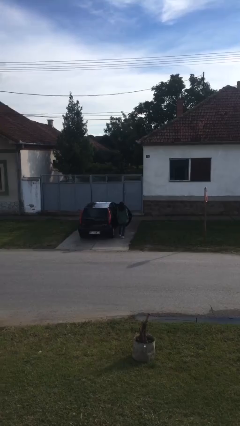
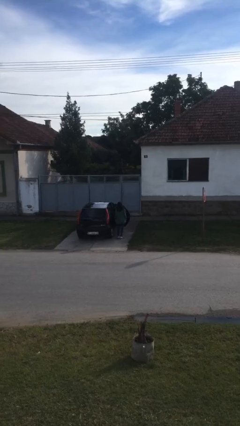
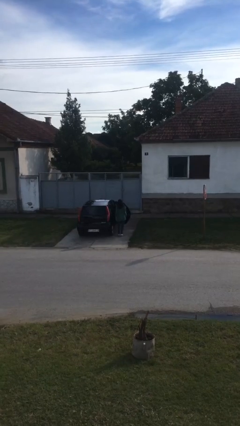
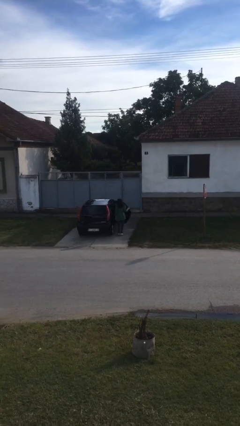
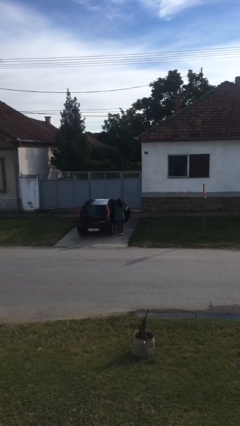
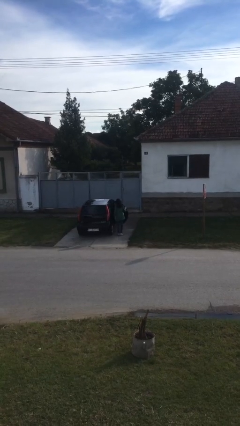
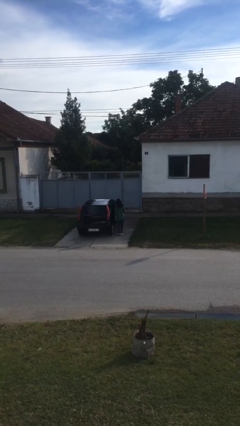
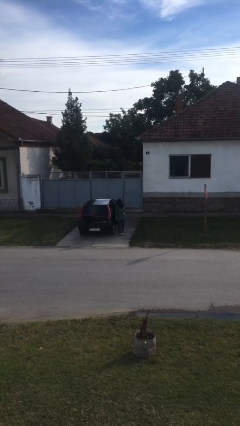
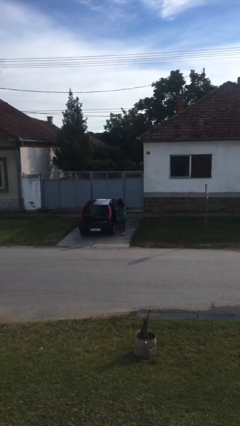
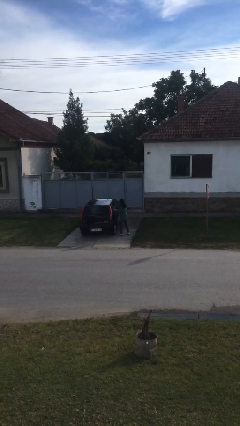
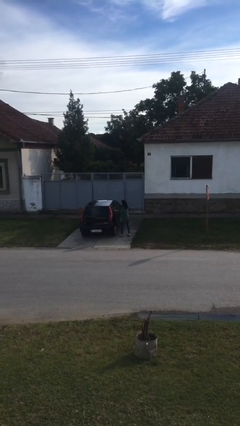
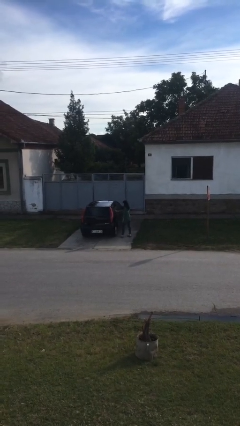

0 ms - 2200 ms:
person closes car door

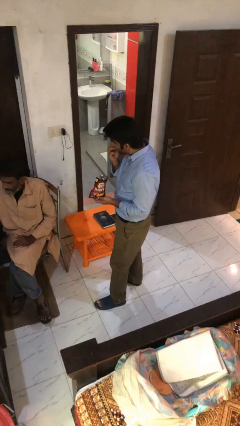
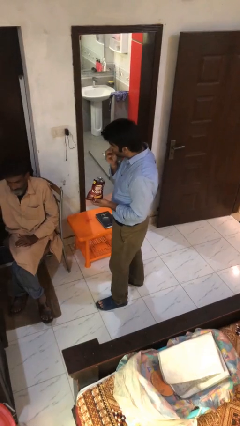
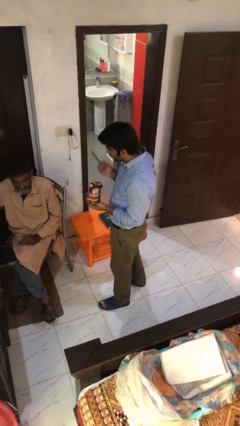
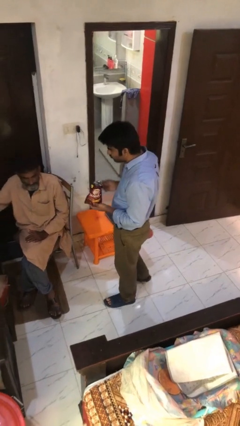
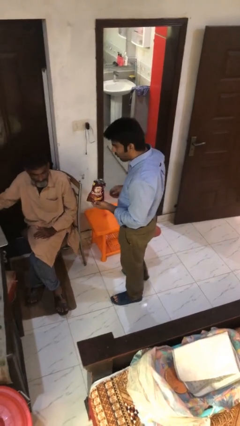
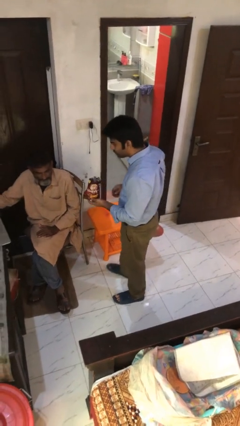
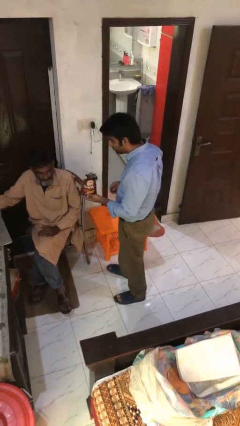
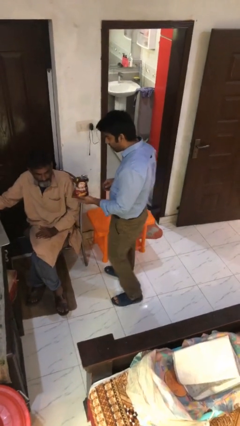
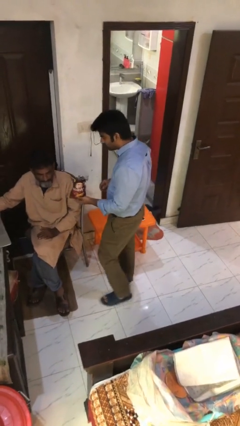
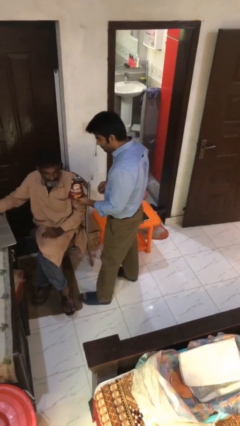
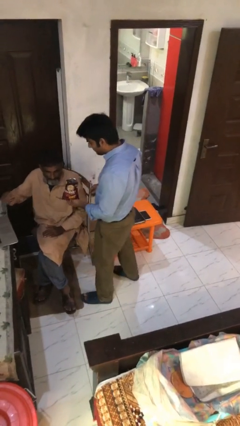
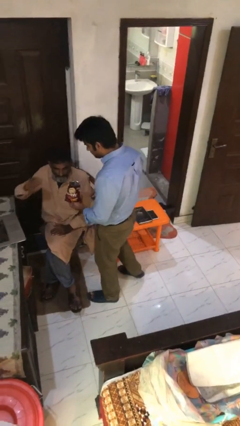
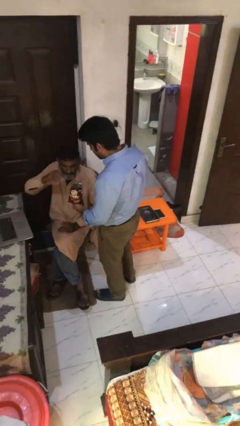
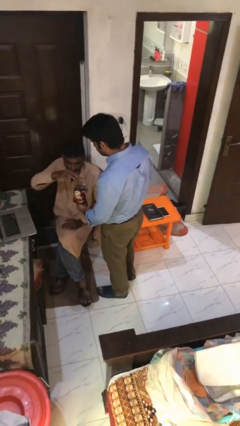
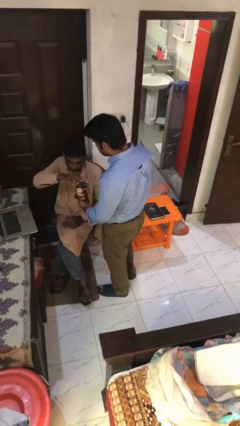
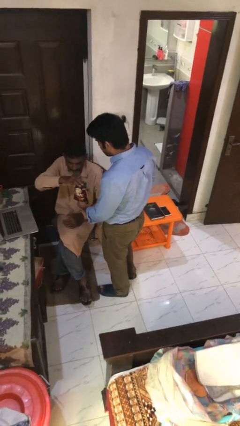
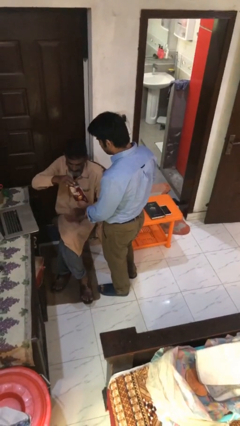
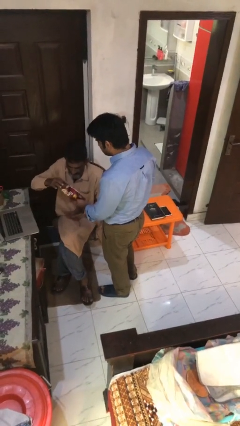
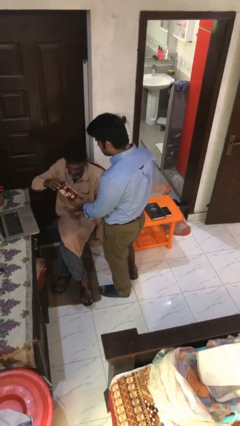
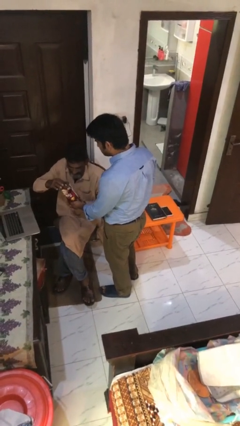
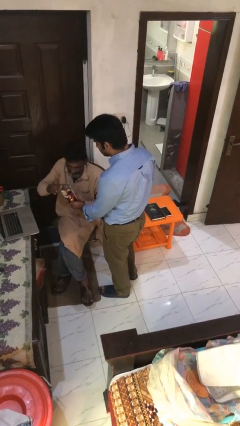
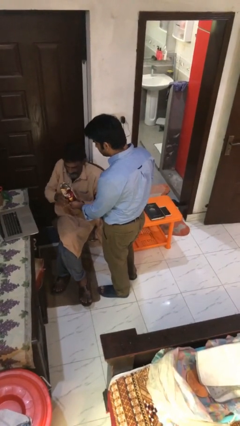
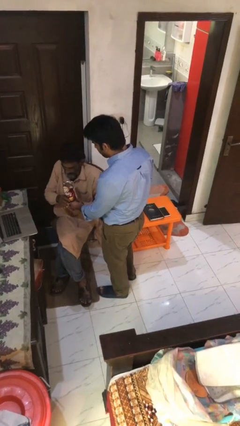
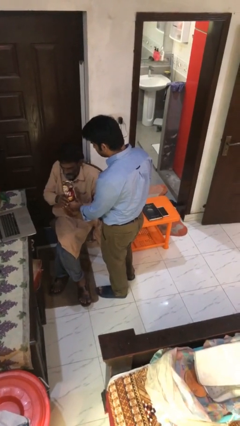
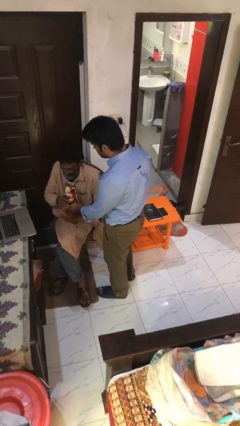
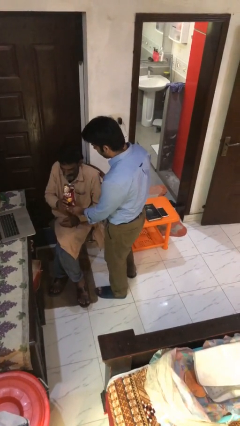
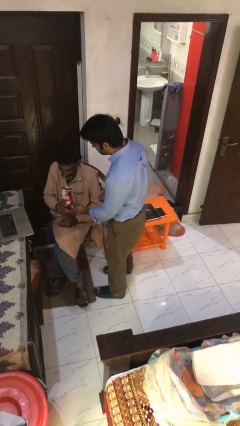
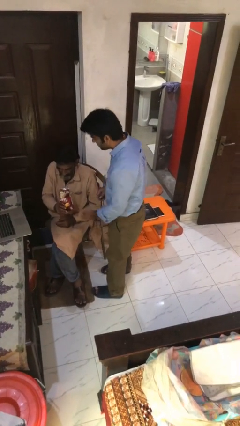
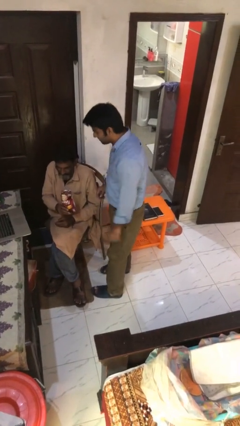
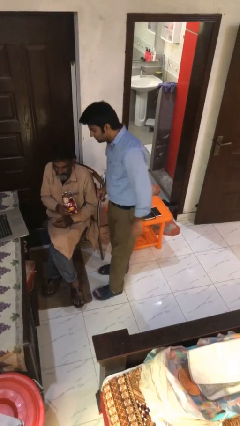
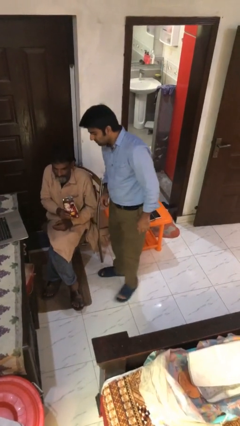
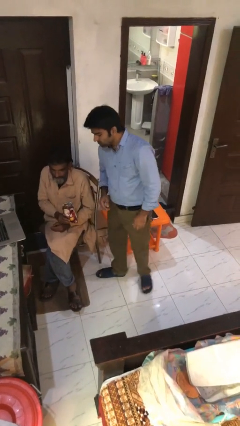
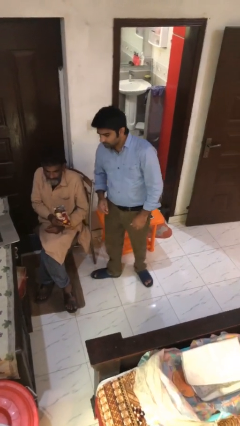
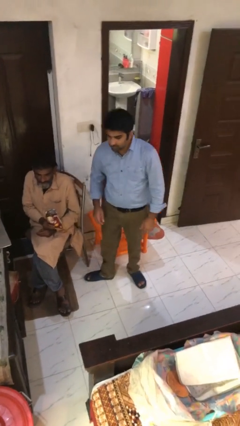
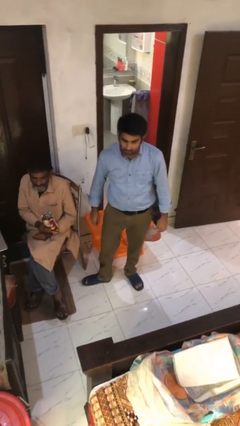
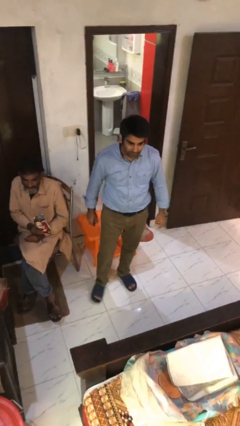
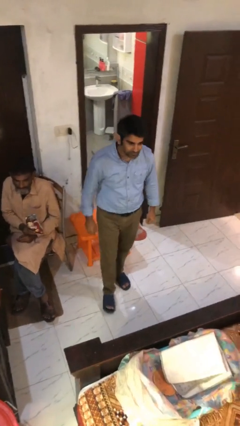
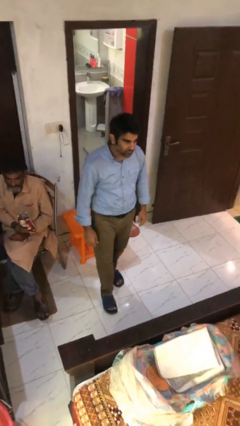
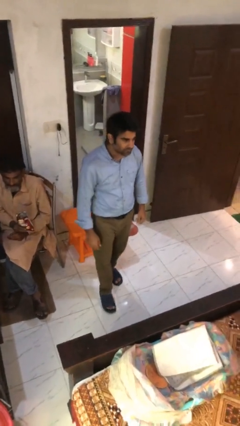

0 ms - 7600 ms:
person transfers object to person

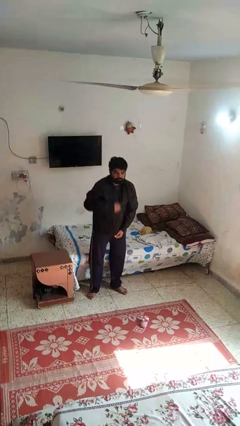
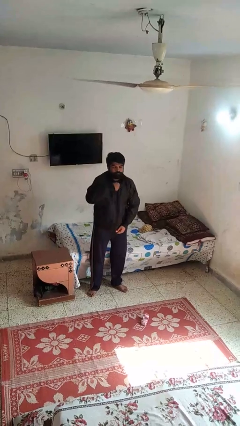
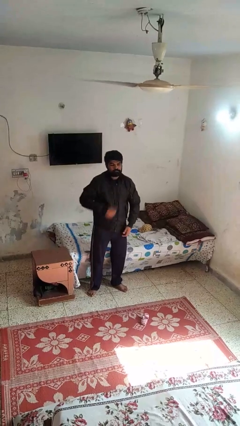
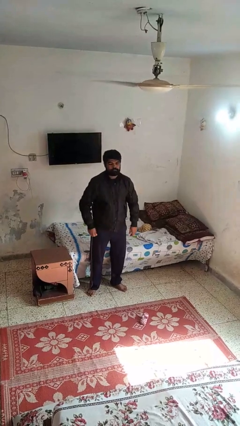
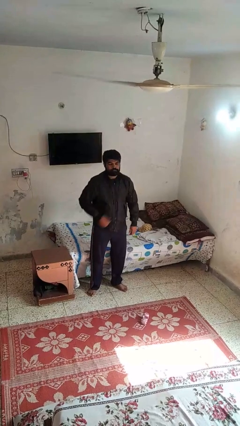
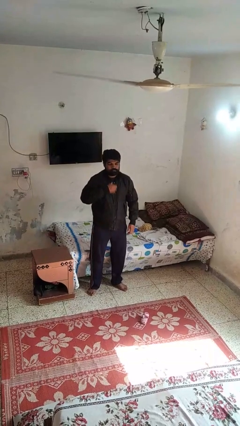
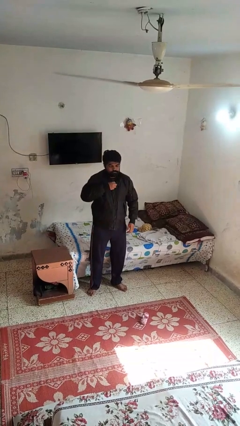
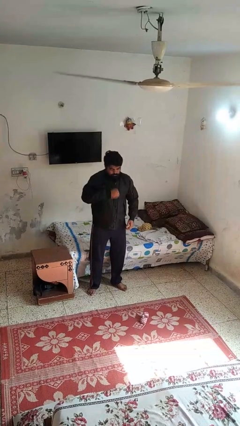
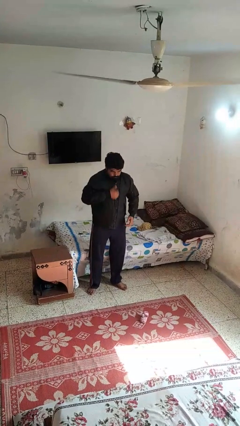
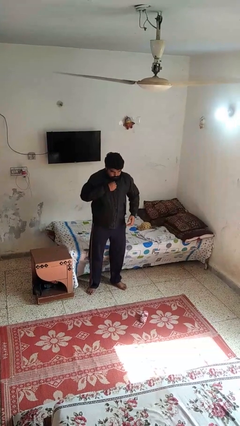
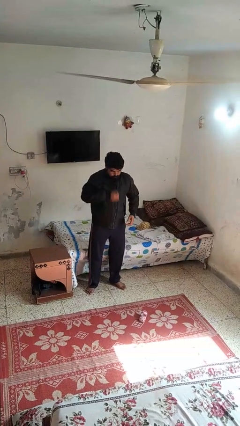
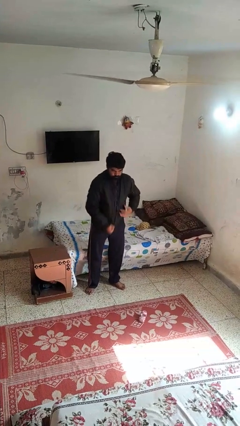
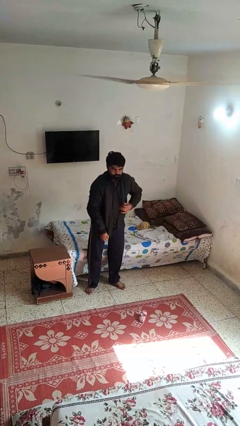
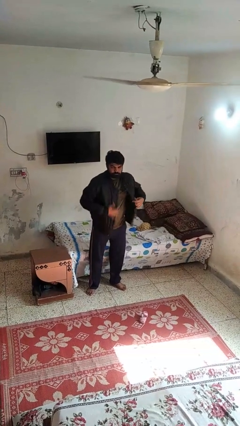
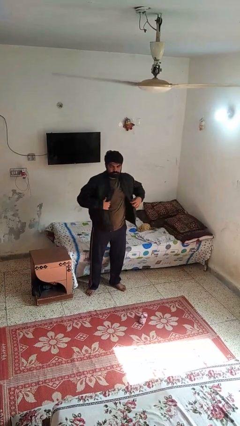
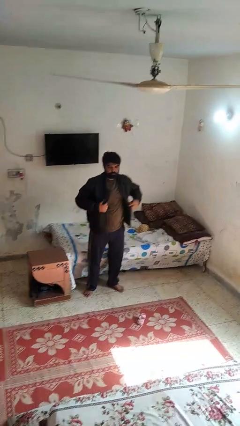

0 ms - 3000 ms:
person unzips jacket

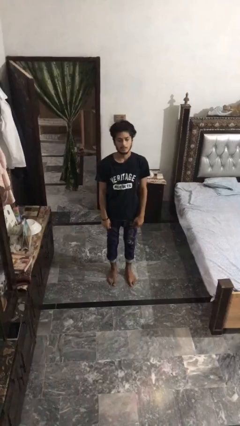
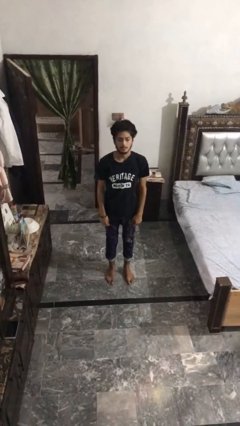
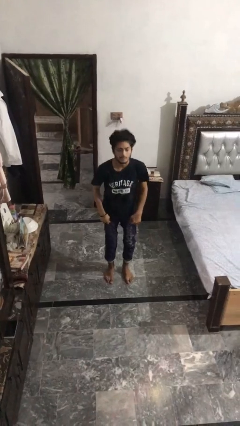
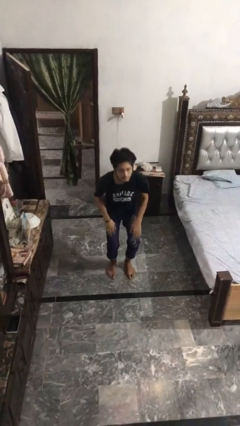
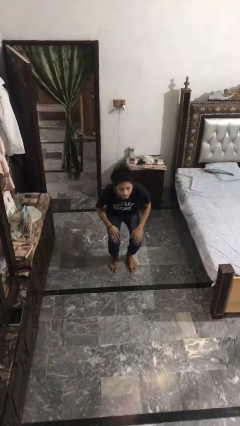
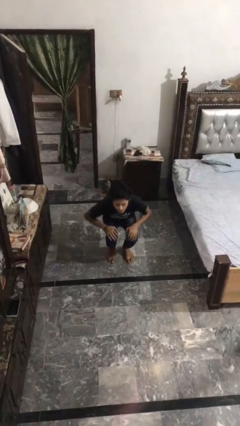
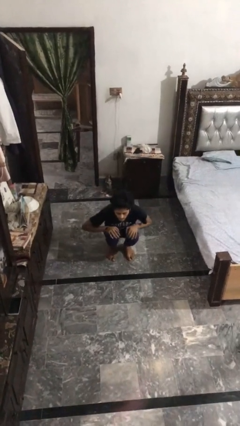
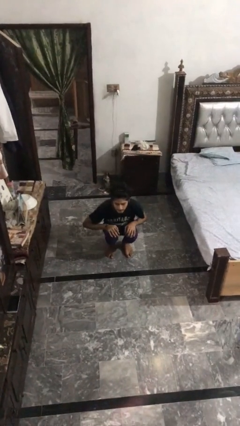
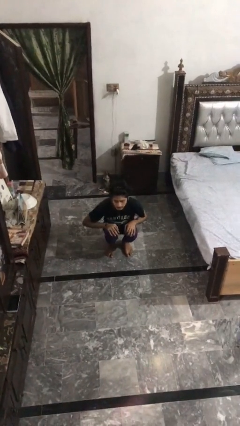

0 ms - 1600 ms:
person squats

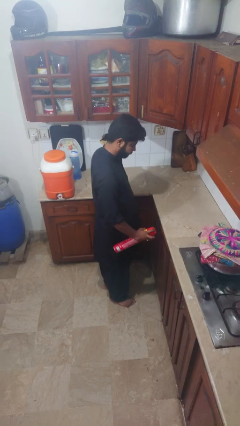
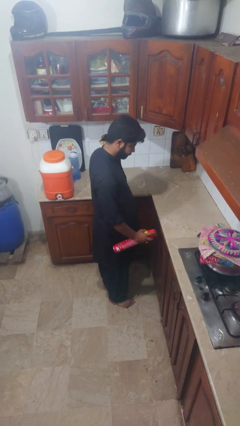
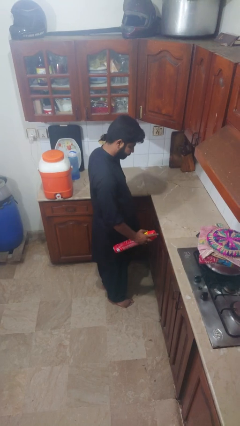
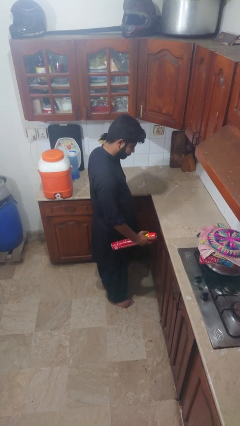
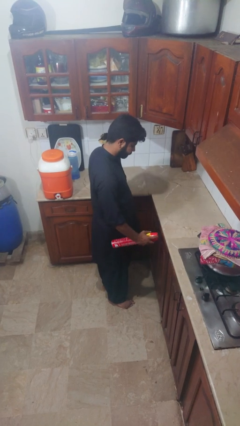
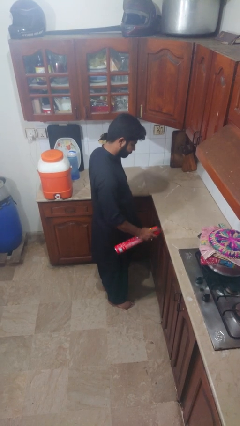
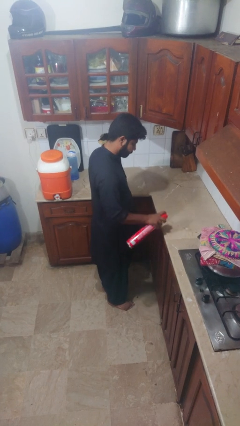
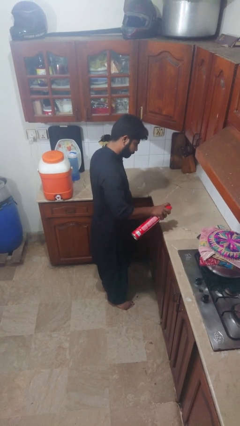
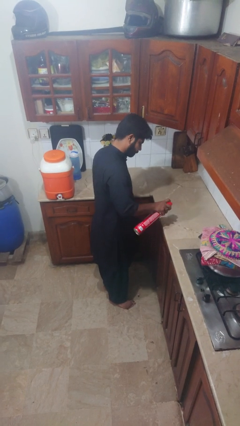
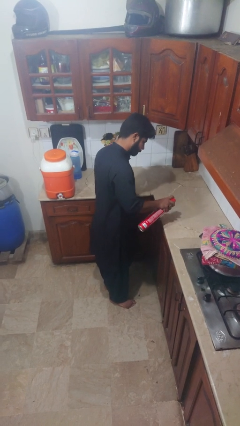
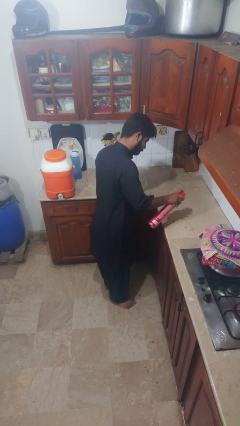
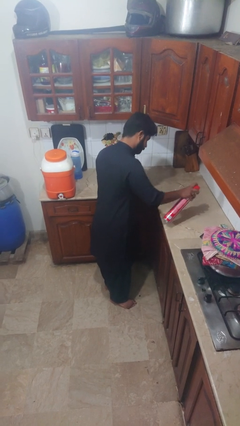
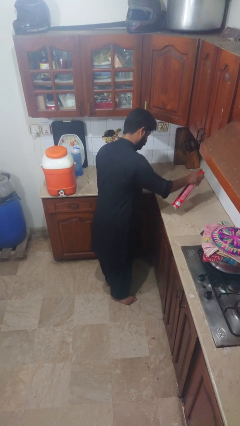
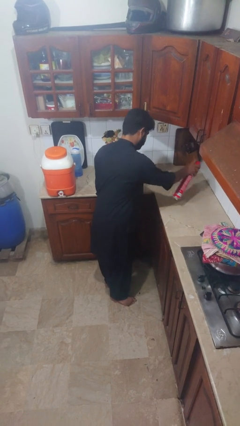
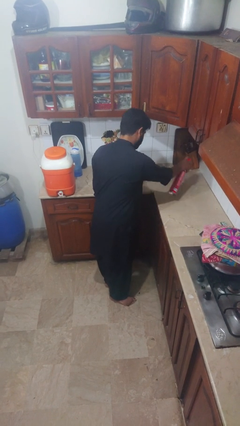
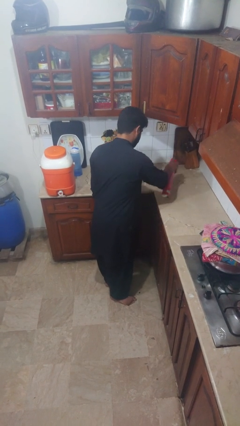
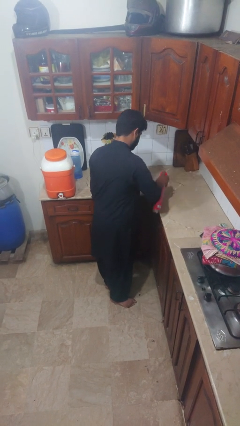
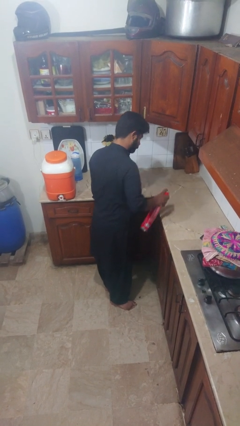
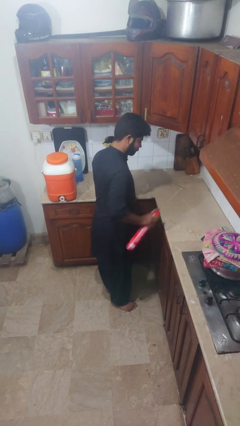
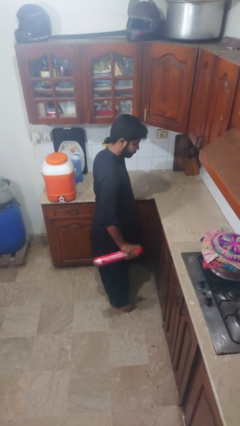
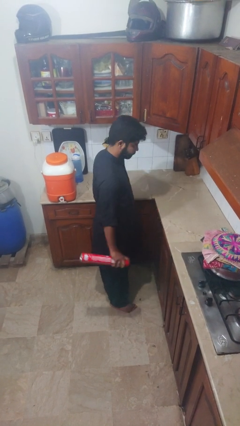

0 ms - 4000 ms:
person sprays from bottle
